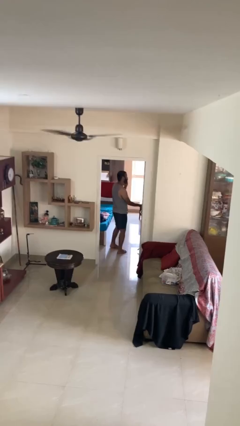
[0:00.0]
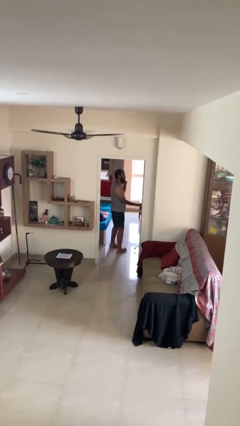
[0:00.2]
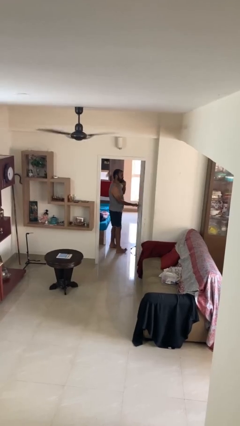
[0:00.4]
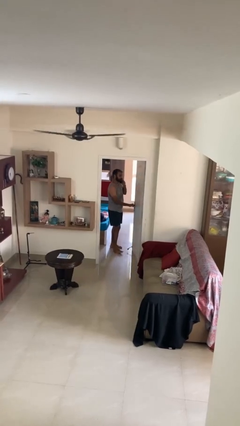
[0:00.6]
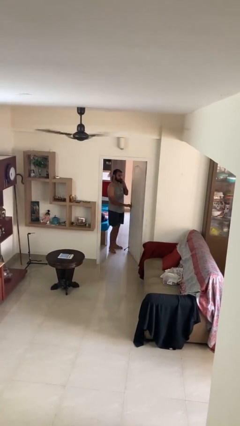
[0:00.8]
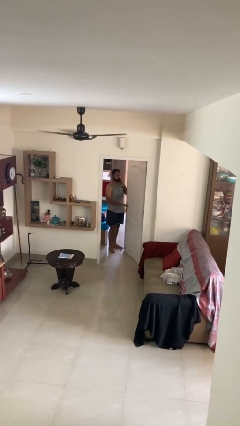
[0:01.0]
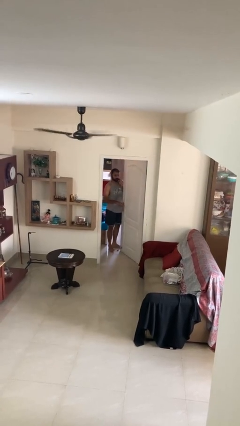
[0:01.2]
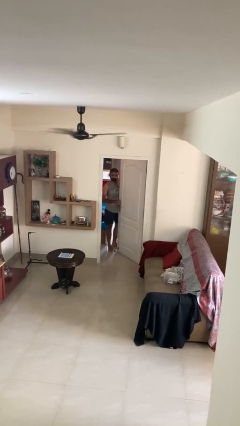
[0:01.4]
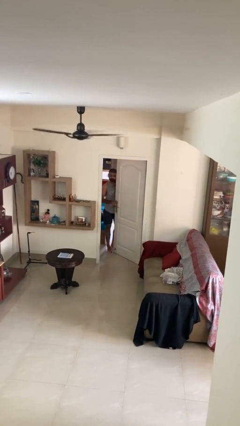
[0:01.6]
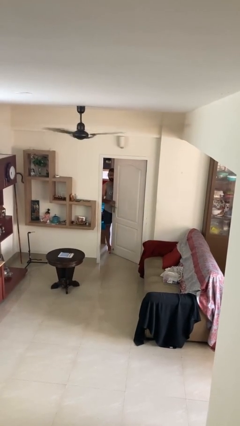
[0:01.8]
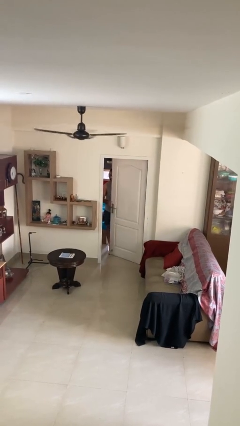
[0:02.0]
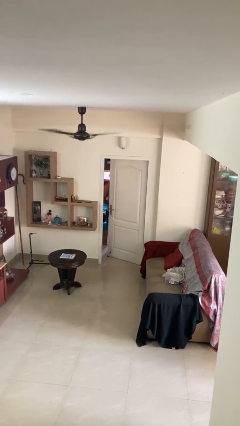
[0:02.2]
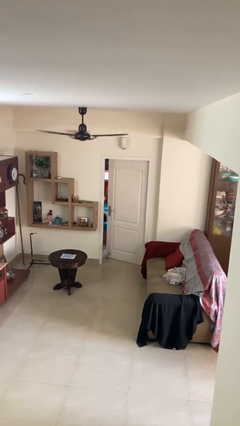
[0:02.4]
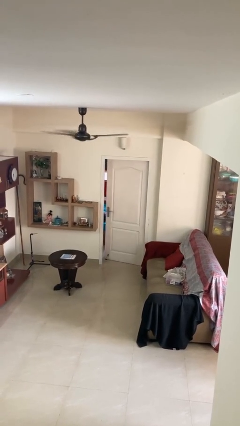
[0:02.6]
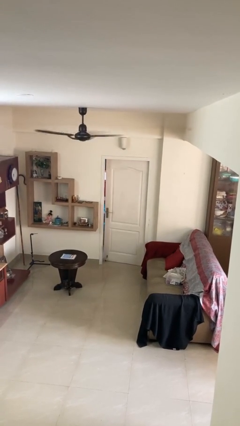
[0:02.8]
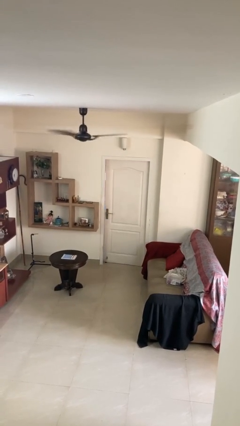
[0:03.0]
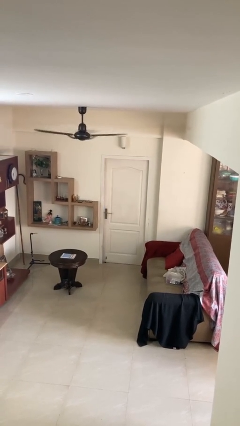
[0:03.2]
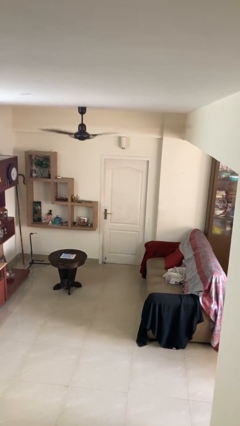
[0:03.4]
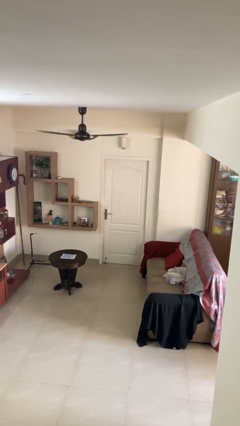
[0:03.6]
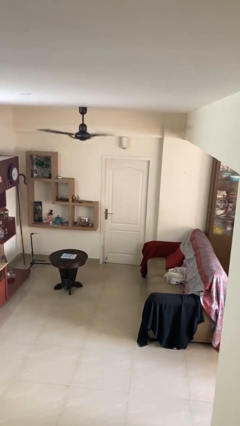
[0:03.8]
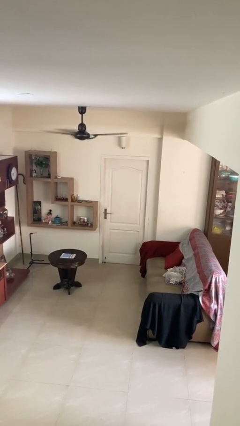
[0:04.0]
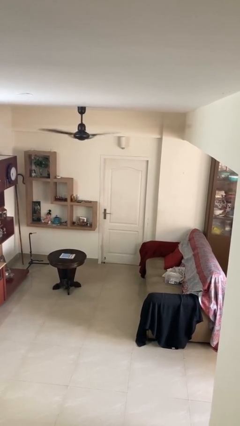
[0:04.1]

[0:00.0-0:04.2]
person closes facility door

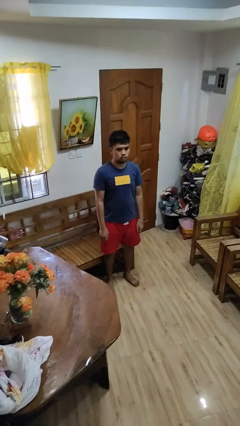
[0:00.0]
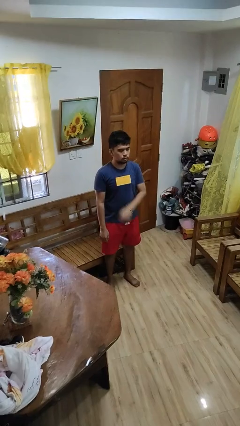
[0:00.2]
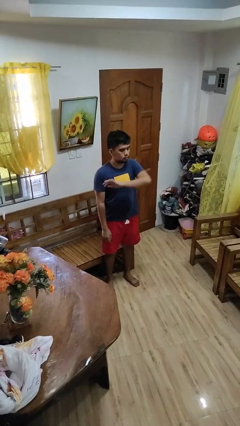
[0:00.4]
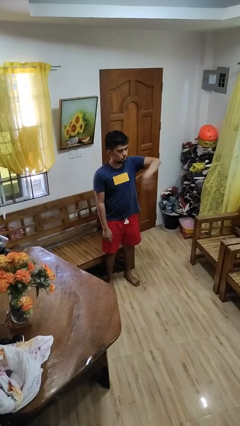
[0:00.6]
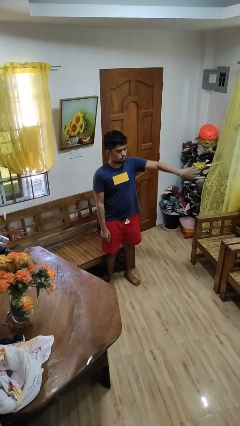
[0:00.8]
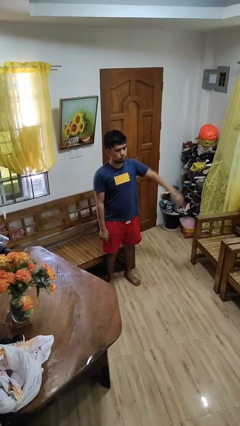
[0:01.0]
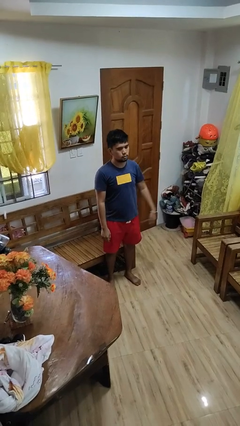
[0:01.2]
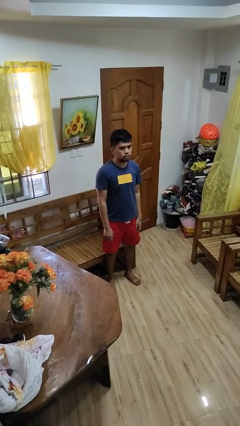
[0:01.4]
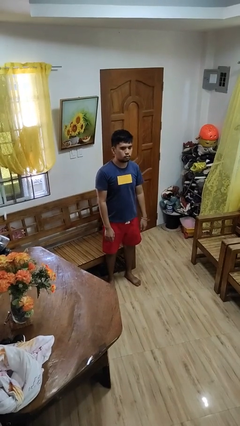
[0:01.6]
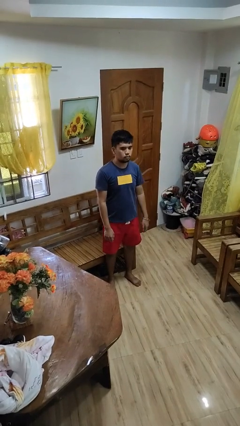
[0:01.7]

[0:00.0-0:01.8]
person gestures swipe left

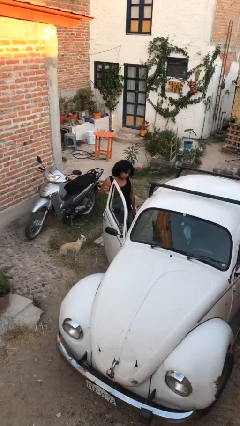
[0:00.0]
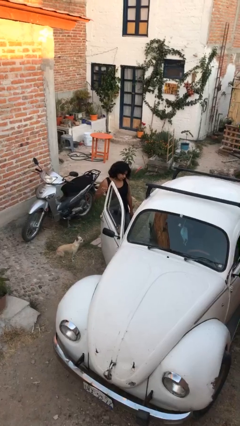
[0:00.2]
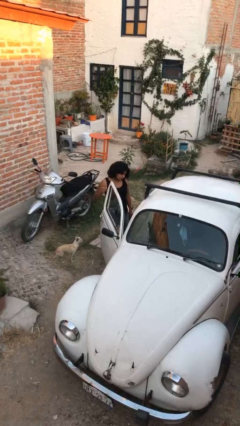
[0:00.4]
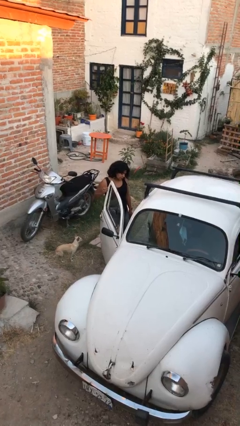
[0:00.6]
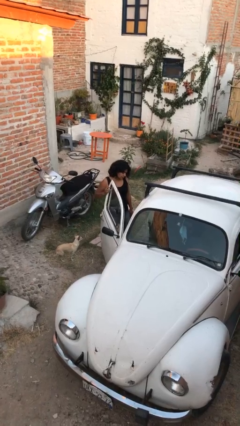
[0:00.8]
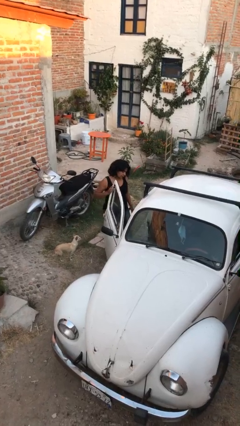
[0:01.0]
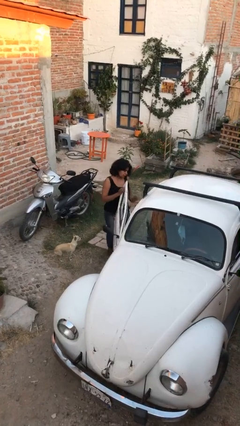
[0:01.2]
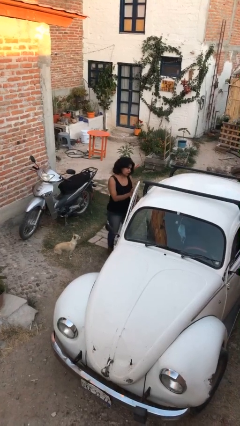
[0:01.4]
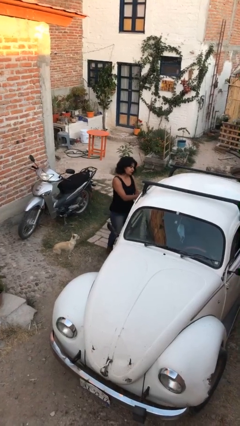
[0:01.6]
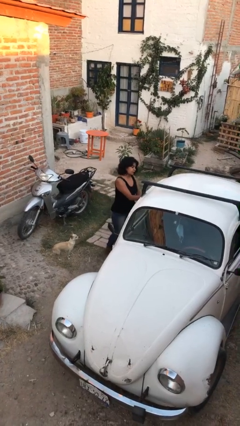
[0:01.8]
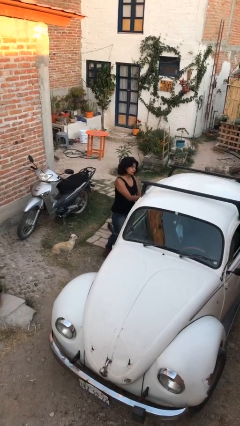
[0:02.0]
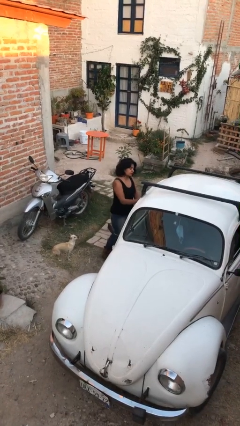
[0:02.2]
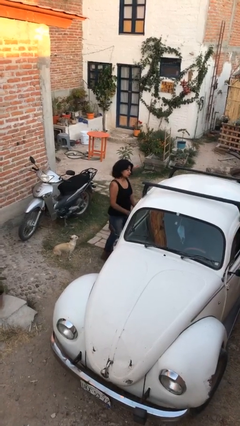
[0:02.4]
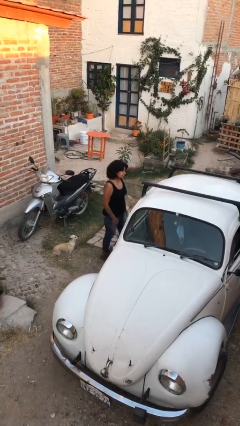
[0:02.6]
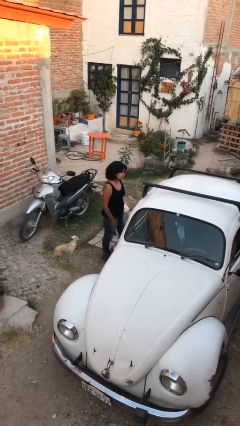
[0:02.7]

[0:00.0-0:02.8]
person closes car door

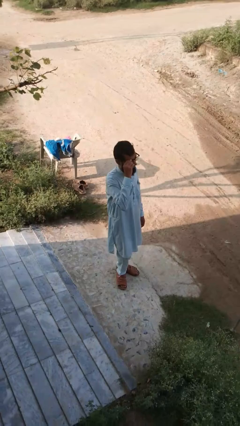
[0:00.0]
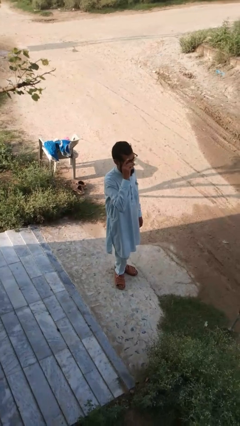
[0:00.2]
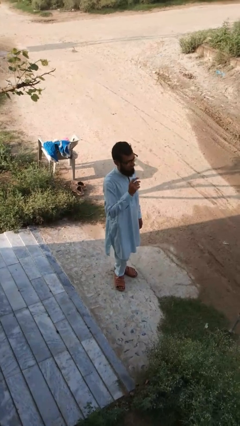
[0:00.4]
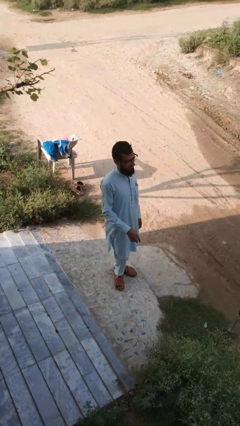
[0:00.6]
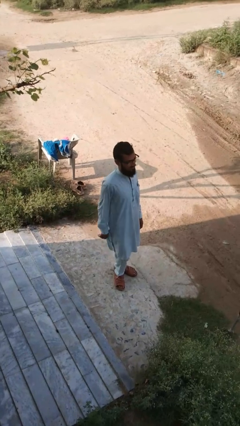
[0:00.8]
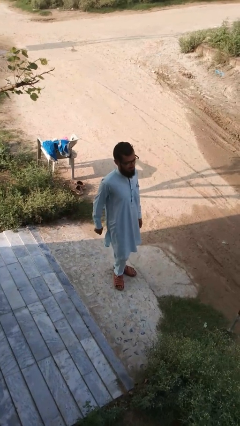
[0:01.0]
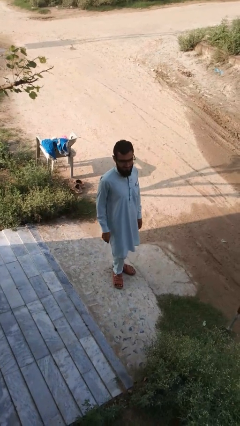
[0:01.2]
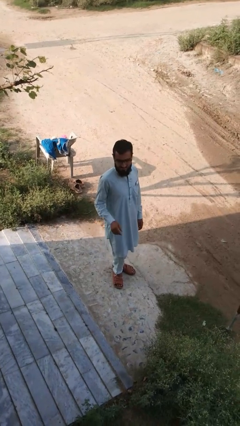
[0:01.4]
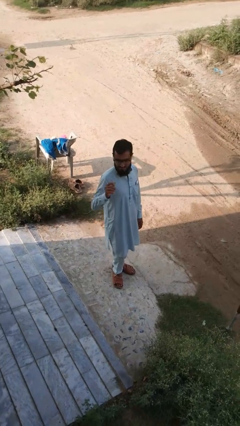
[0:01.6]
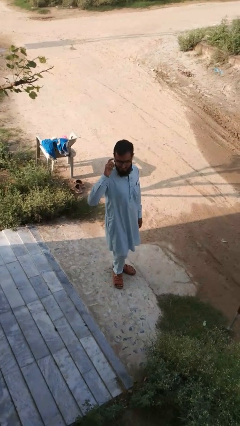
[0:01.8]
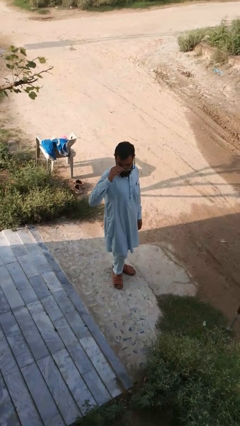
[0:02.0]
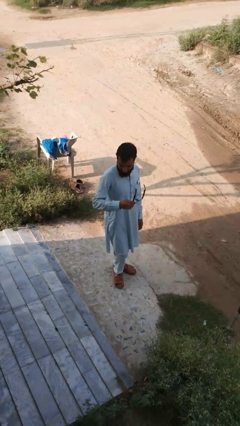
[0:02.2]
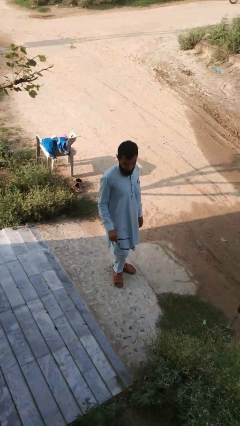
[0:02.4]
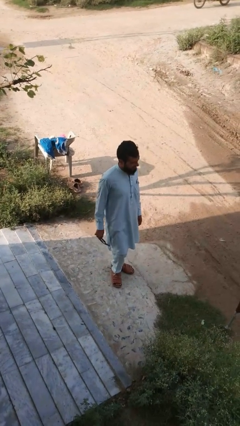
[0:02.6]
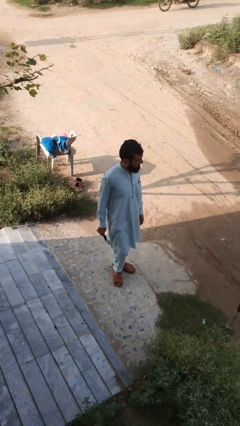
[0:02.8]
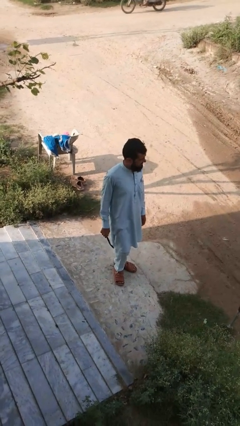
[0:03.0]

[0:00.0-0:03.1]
person takes off glasses

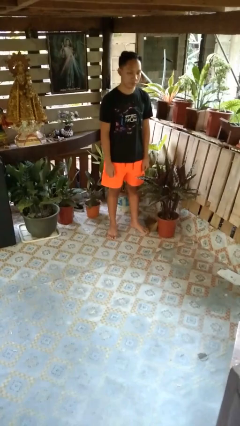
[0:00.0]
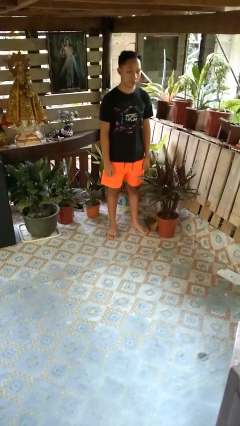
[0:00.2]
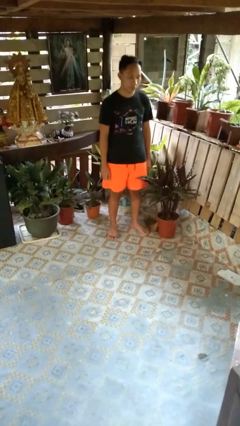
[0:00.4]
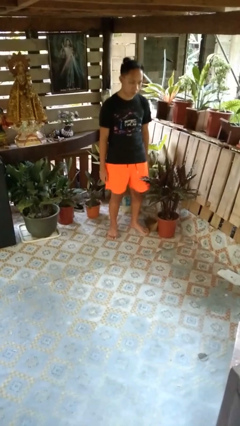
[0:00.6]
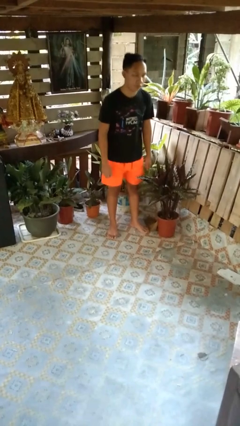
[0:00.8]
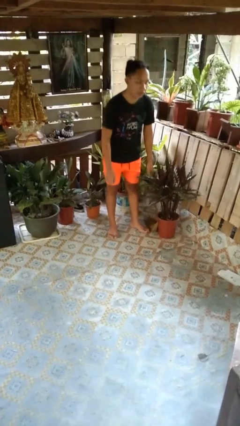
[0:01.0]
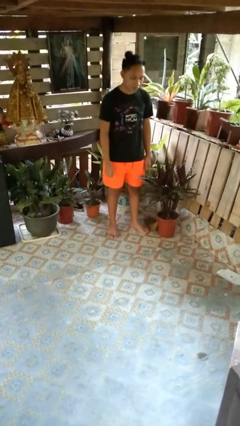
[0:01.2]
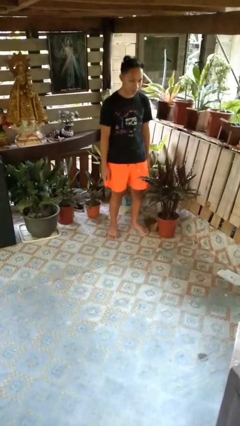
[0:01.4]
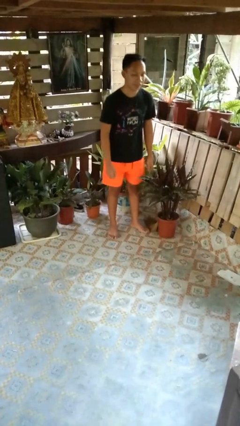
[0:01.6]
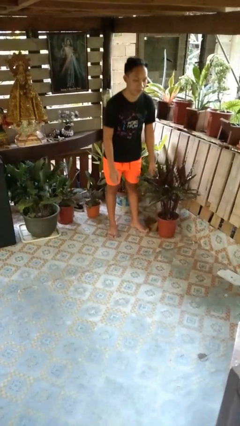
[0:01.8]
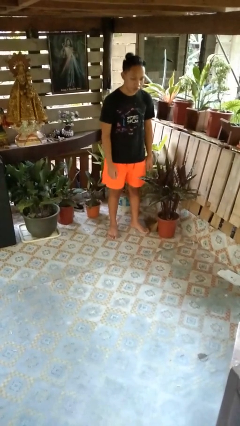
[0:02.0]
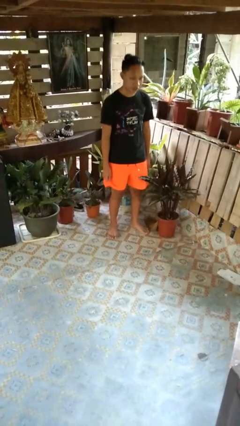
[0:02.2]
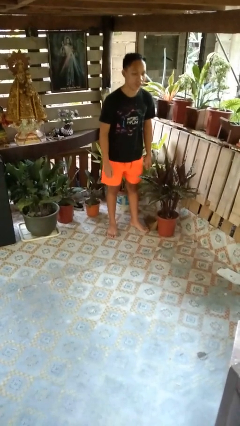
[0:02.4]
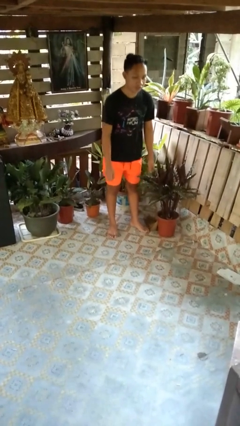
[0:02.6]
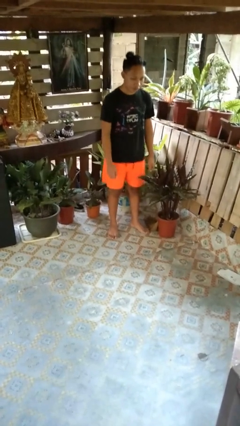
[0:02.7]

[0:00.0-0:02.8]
person wiggles hips

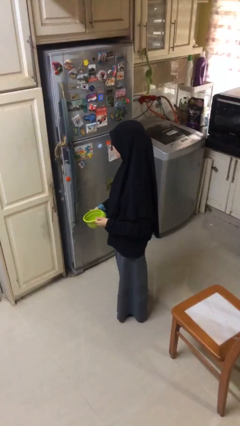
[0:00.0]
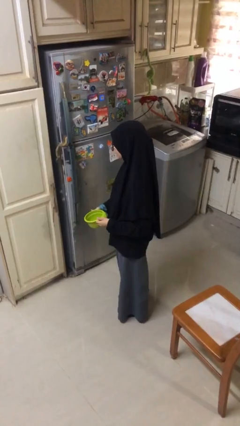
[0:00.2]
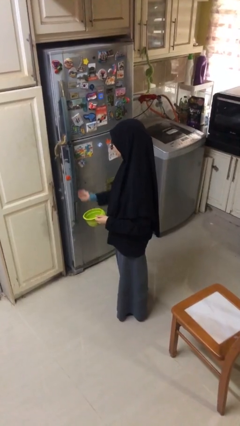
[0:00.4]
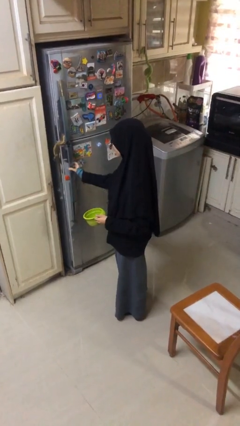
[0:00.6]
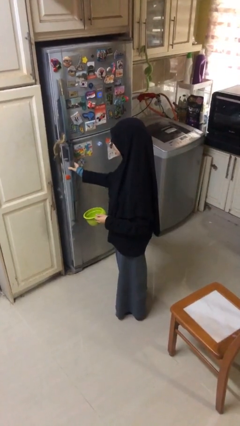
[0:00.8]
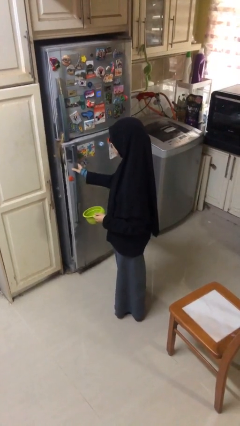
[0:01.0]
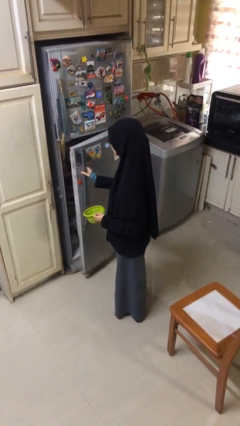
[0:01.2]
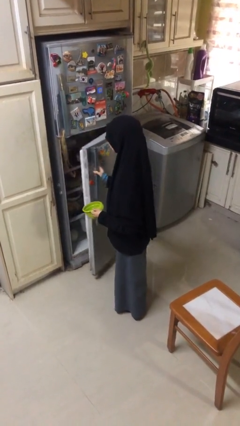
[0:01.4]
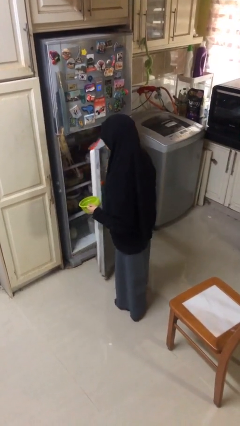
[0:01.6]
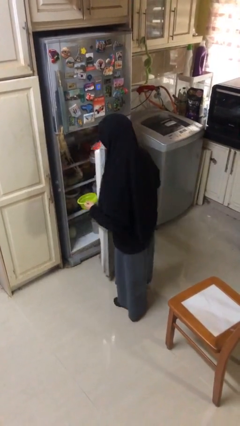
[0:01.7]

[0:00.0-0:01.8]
person opens refrigerator

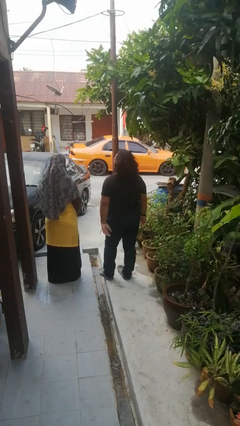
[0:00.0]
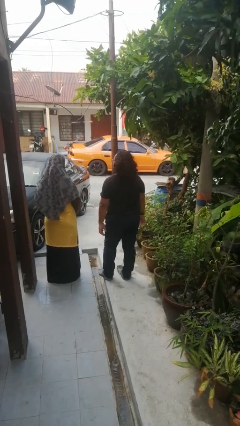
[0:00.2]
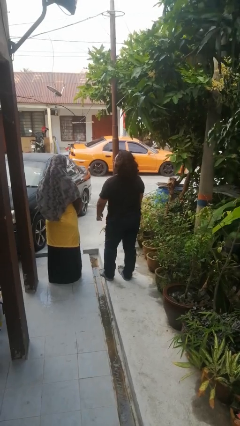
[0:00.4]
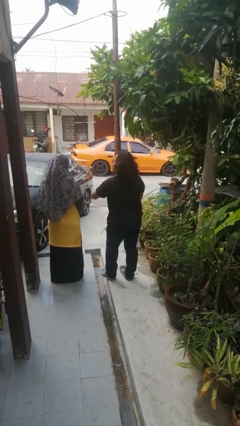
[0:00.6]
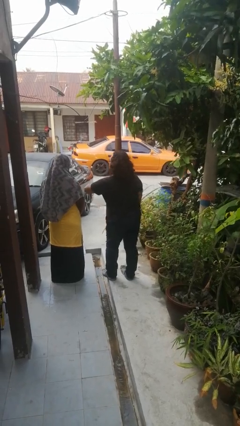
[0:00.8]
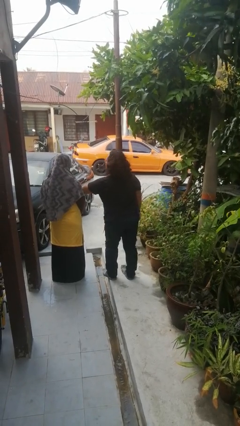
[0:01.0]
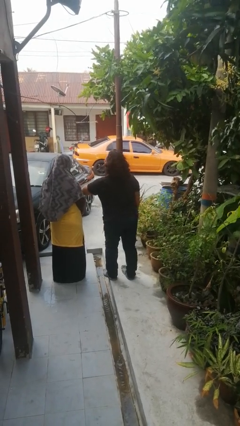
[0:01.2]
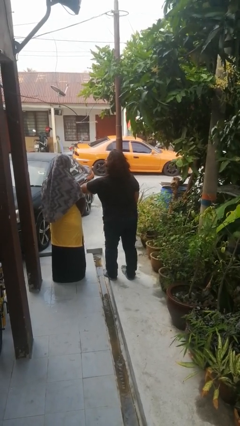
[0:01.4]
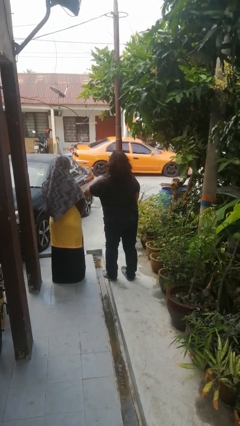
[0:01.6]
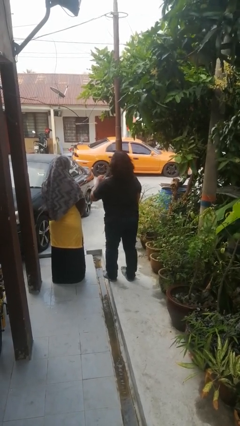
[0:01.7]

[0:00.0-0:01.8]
person nudges person with elbow
